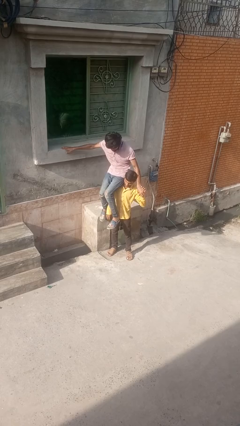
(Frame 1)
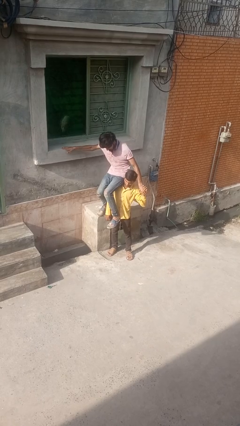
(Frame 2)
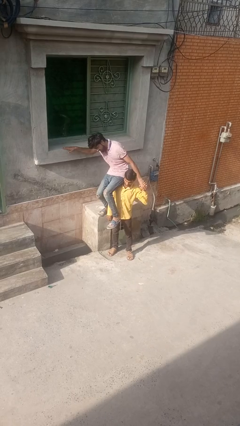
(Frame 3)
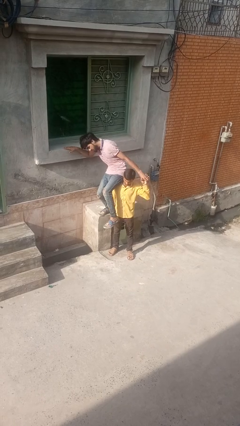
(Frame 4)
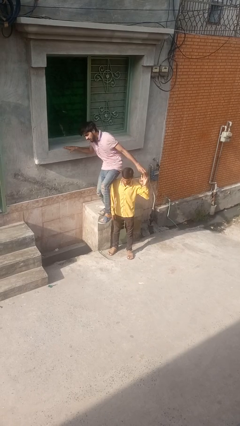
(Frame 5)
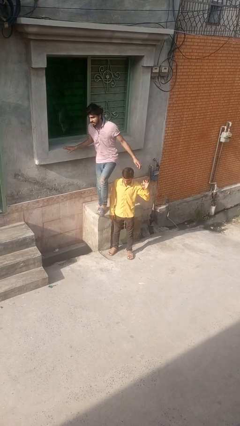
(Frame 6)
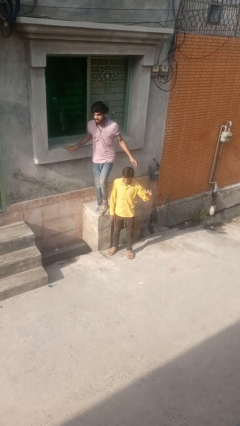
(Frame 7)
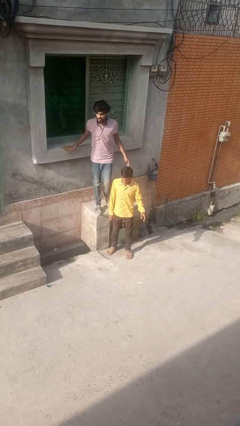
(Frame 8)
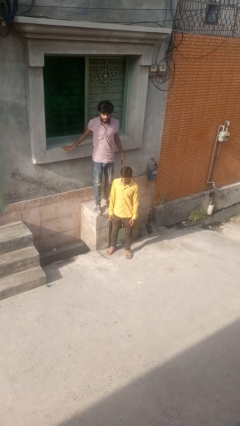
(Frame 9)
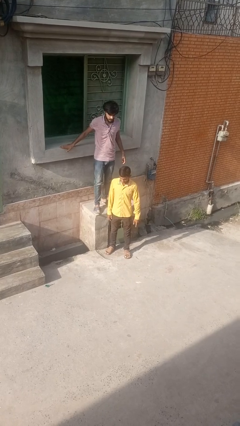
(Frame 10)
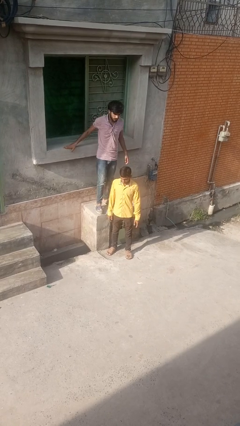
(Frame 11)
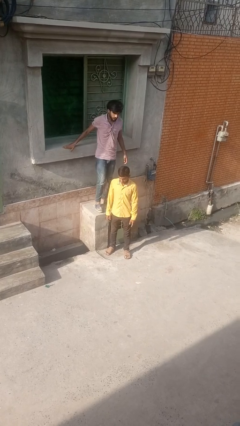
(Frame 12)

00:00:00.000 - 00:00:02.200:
person puts down person

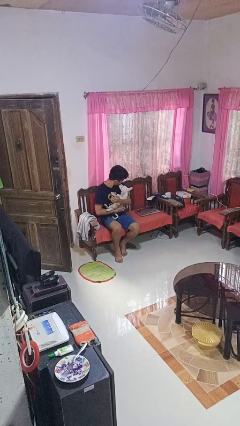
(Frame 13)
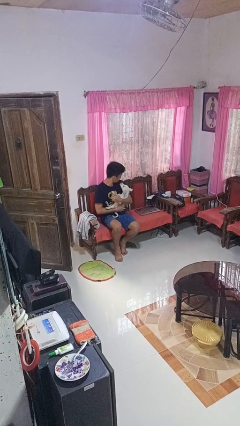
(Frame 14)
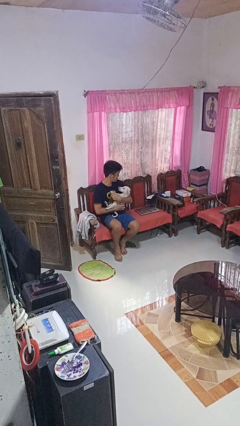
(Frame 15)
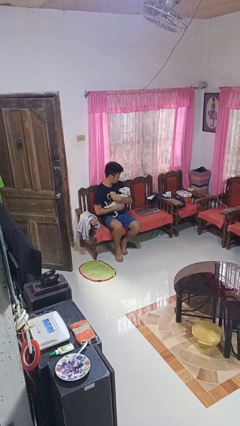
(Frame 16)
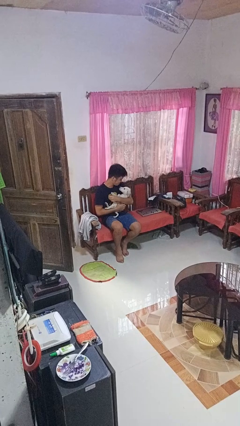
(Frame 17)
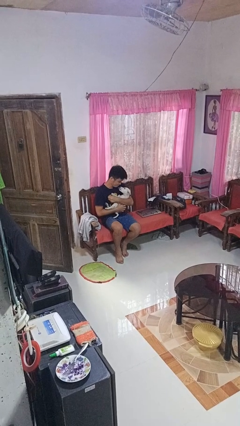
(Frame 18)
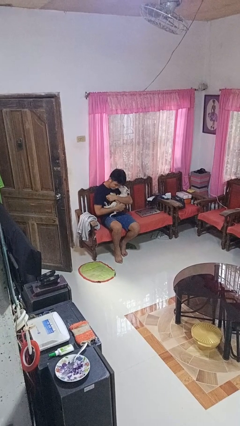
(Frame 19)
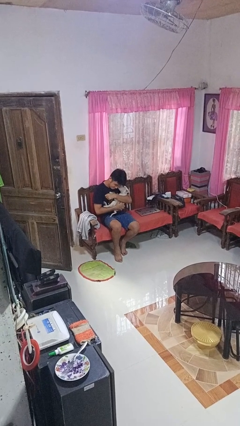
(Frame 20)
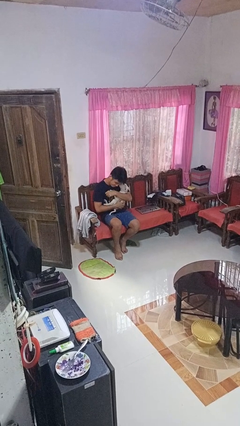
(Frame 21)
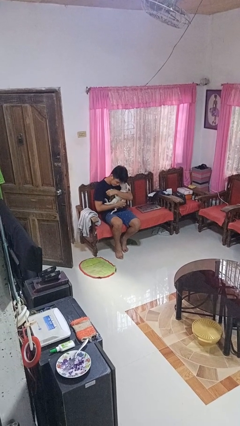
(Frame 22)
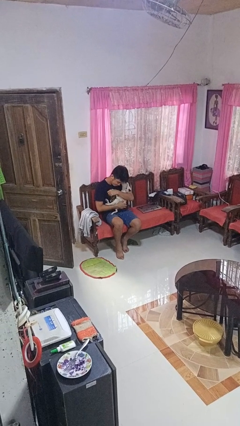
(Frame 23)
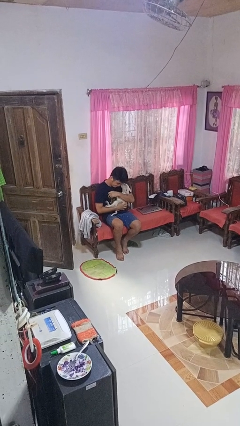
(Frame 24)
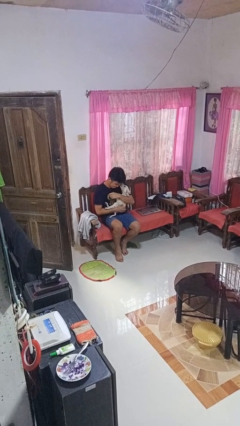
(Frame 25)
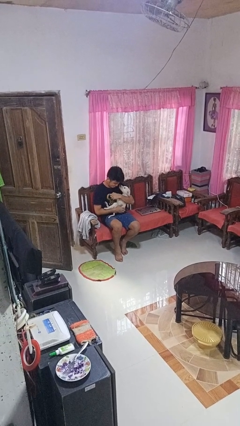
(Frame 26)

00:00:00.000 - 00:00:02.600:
person hugs dog

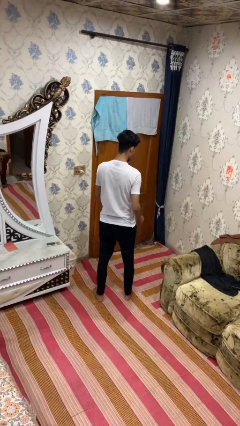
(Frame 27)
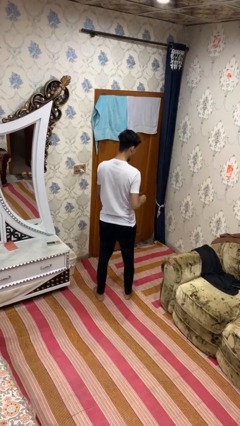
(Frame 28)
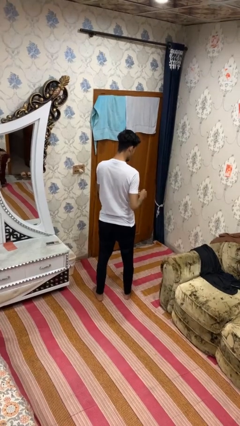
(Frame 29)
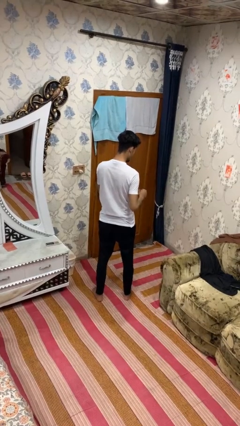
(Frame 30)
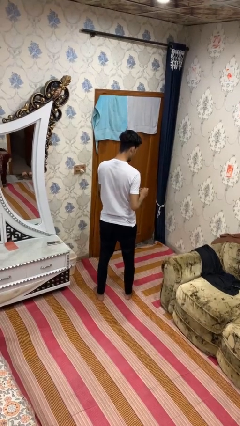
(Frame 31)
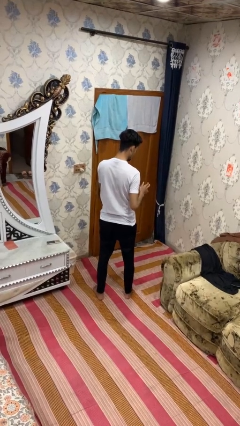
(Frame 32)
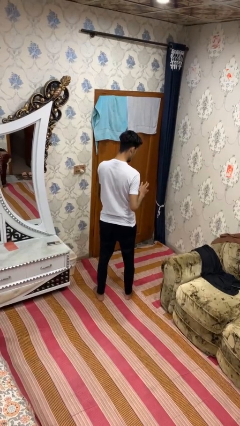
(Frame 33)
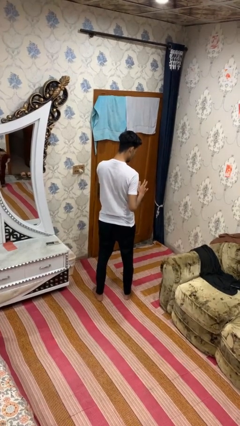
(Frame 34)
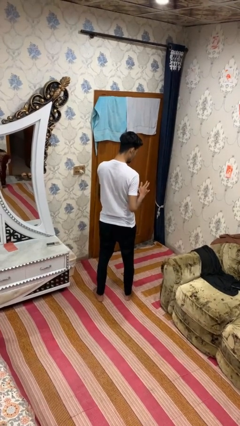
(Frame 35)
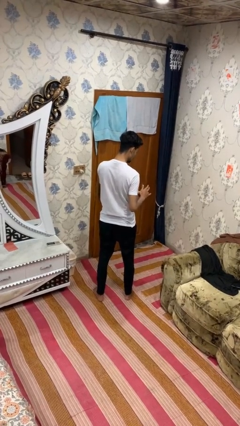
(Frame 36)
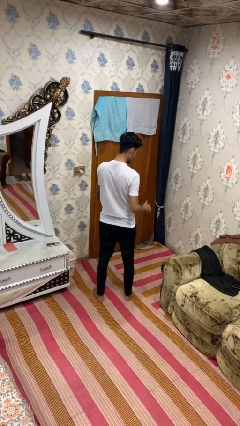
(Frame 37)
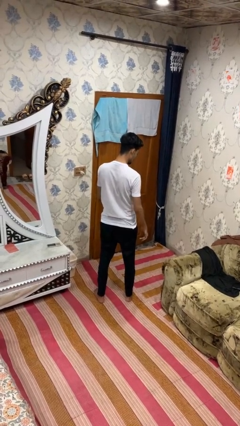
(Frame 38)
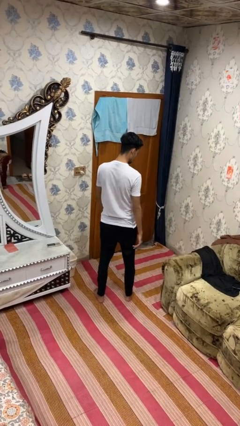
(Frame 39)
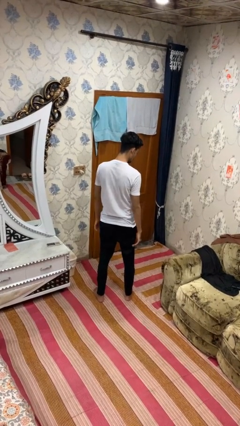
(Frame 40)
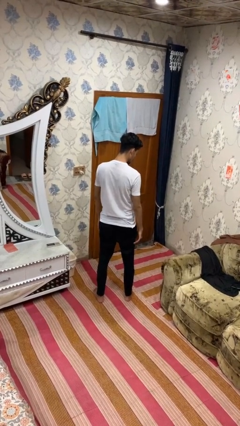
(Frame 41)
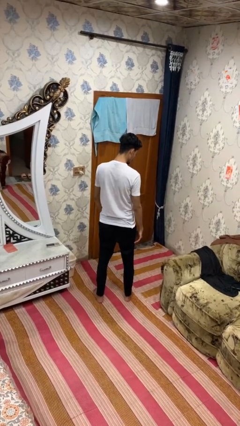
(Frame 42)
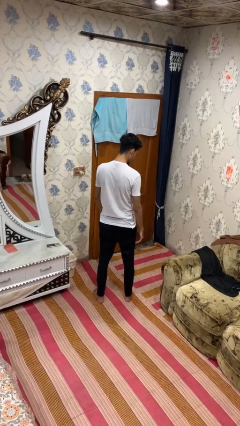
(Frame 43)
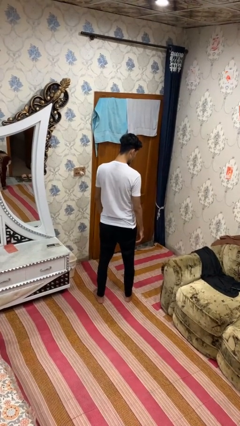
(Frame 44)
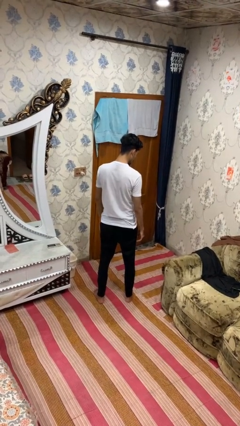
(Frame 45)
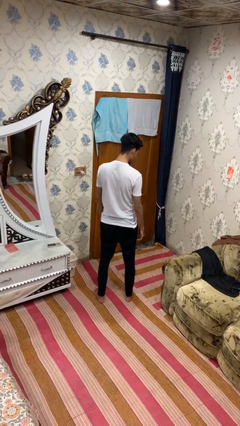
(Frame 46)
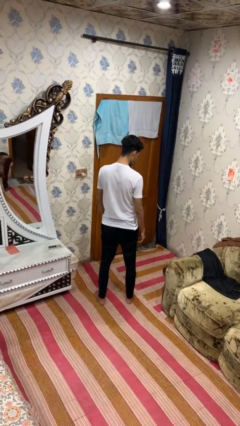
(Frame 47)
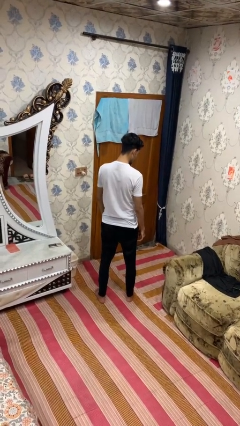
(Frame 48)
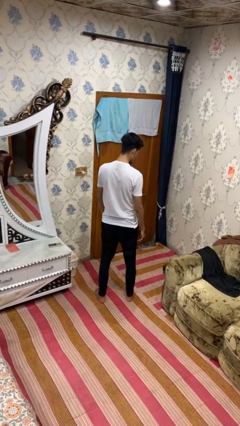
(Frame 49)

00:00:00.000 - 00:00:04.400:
person puts on ring

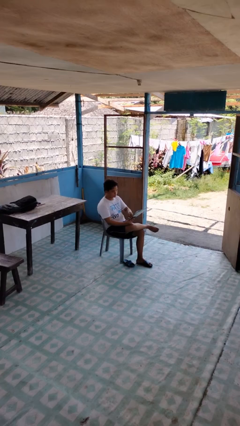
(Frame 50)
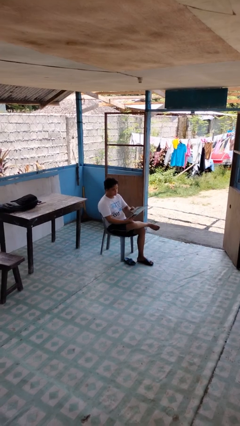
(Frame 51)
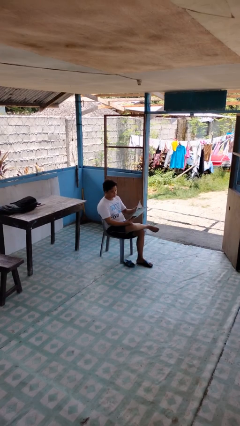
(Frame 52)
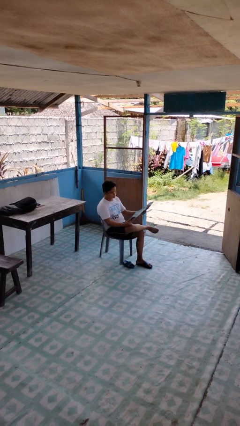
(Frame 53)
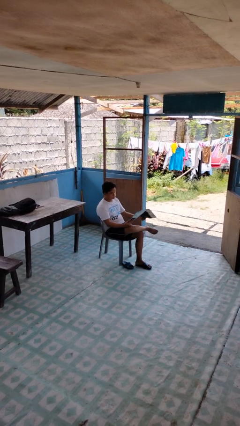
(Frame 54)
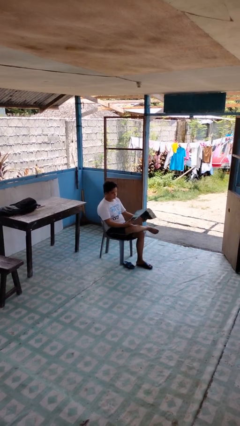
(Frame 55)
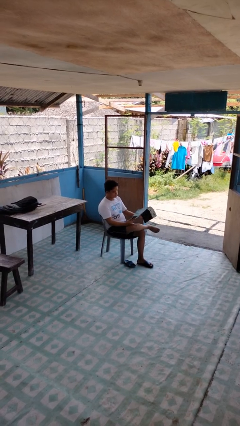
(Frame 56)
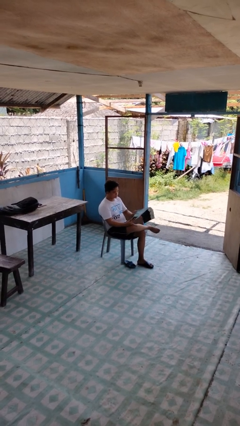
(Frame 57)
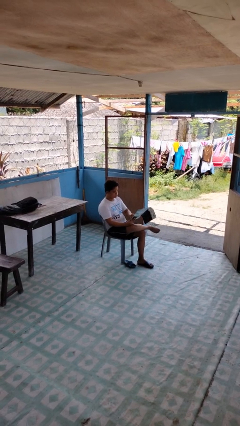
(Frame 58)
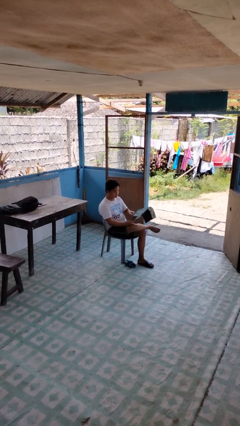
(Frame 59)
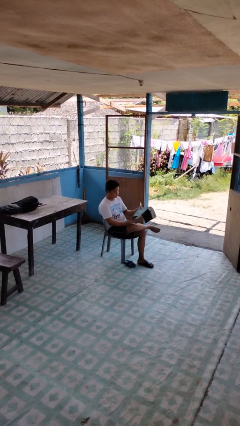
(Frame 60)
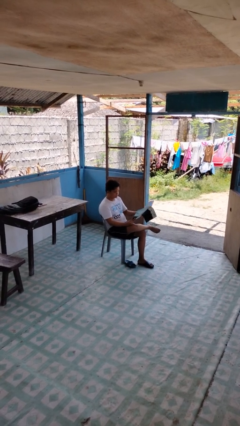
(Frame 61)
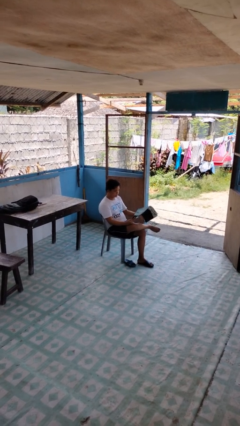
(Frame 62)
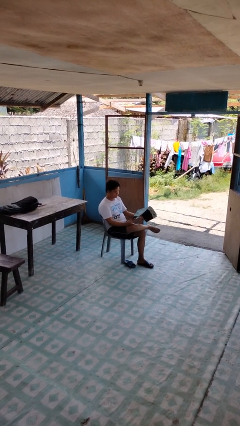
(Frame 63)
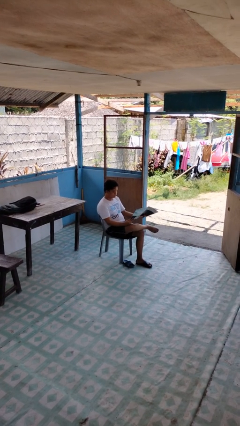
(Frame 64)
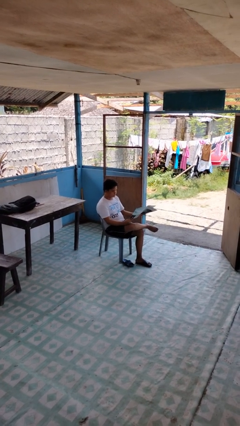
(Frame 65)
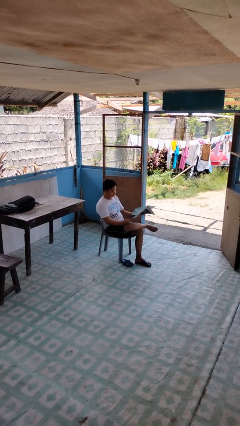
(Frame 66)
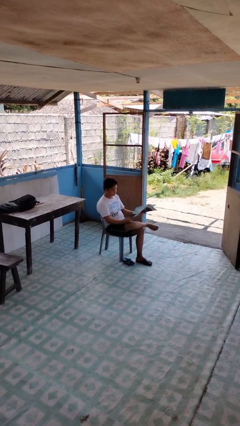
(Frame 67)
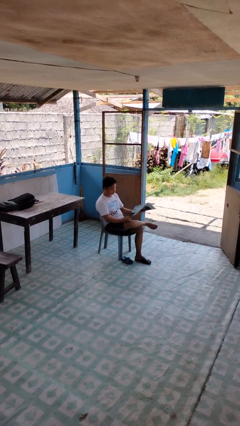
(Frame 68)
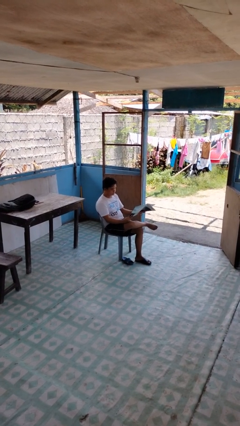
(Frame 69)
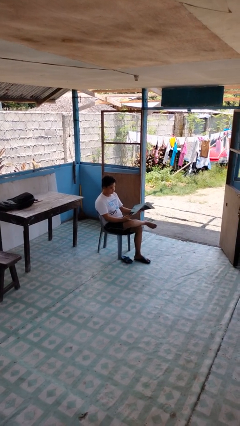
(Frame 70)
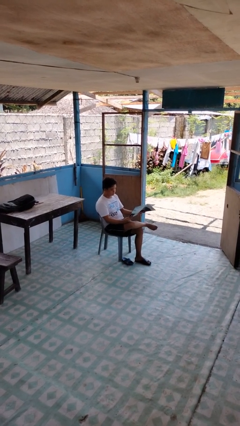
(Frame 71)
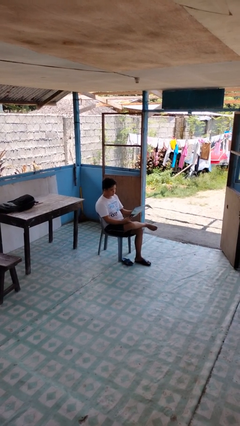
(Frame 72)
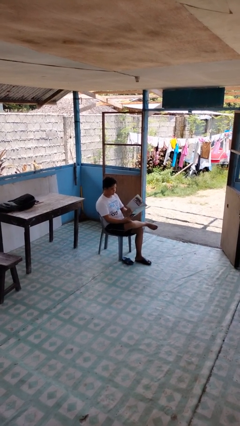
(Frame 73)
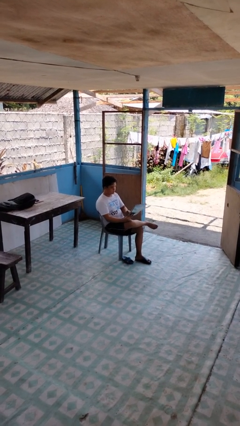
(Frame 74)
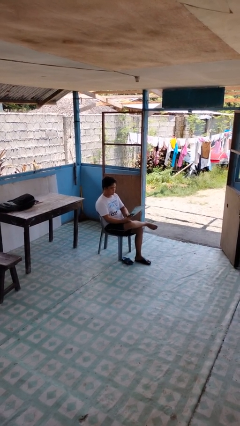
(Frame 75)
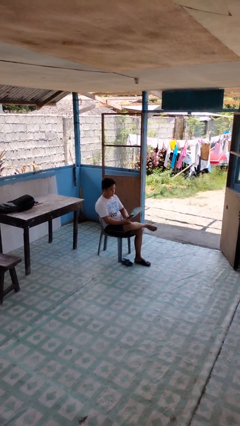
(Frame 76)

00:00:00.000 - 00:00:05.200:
person reads magazine

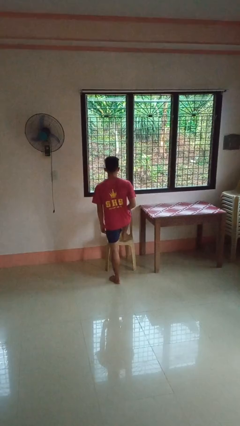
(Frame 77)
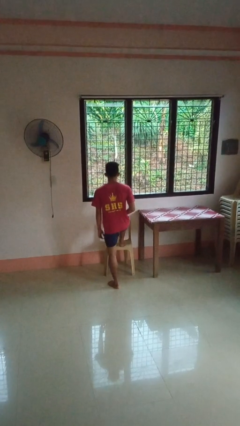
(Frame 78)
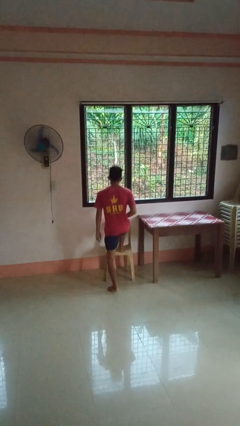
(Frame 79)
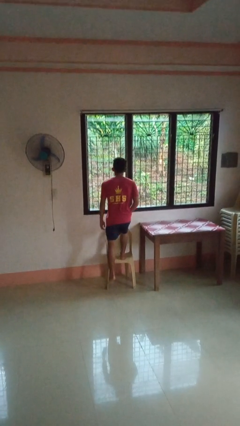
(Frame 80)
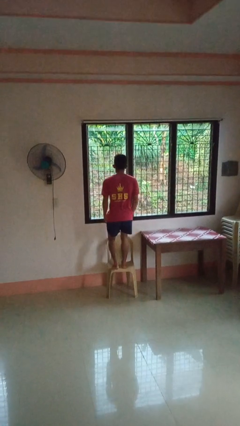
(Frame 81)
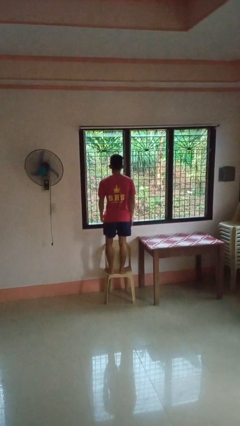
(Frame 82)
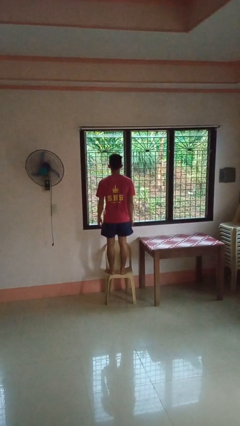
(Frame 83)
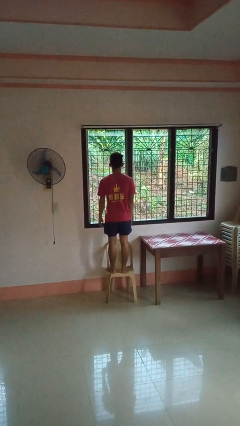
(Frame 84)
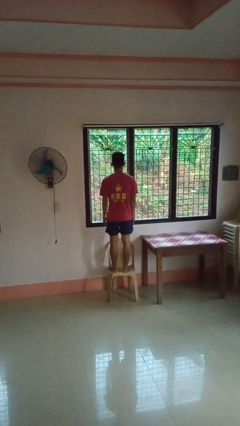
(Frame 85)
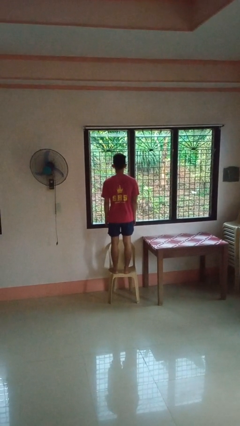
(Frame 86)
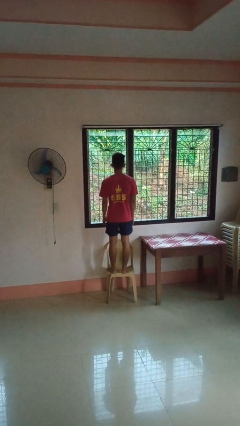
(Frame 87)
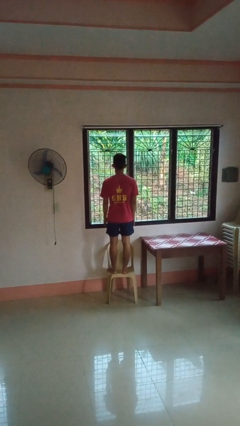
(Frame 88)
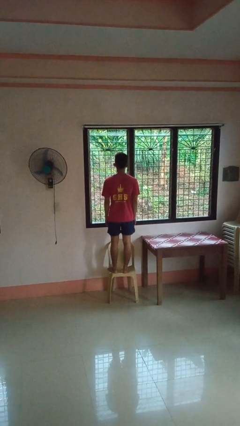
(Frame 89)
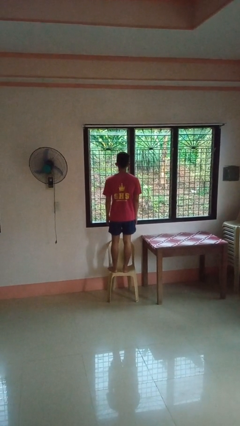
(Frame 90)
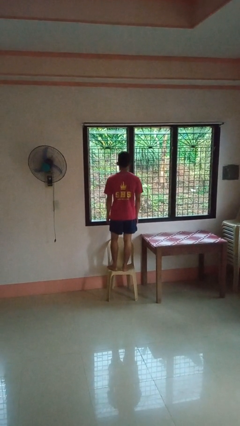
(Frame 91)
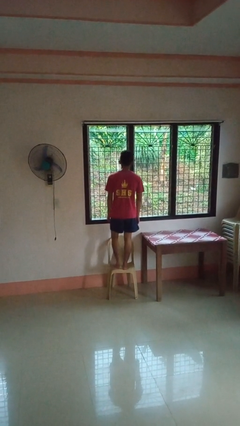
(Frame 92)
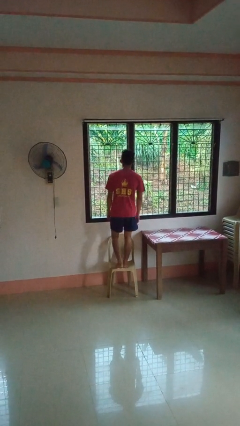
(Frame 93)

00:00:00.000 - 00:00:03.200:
person climbs on chair

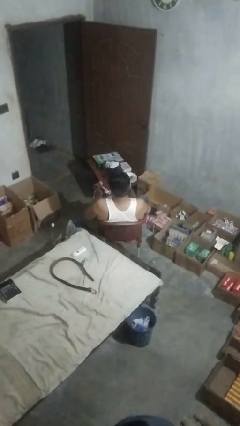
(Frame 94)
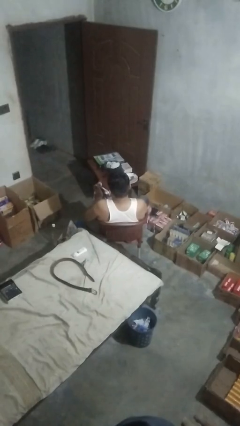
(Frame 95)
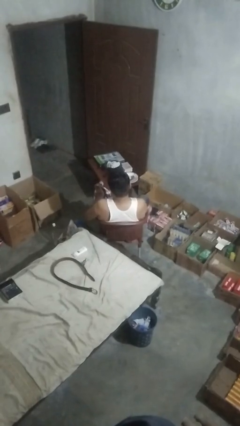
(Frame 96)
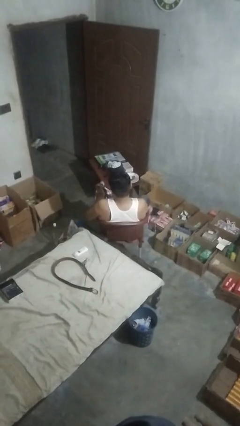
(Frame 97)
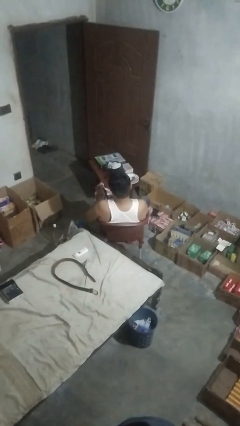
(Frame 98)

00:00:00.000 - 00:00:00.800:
person folds shirt
